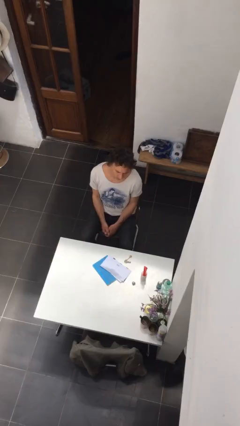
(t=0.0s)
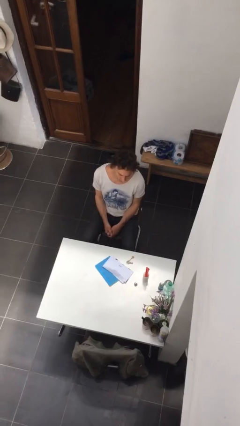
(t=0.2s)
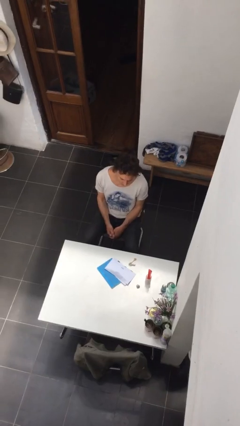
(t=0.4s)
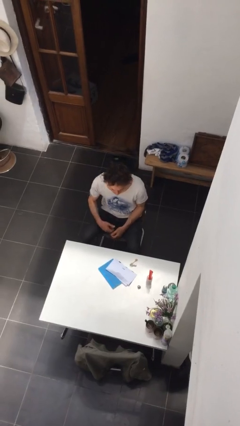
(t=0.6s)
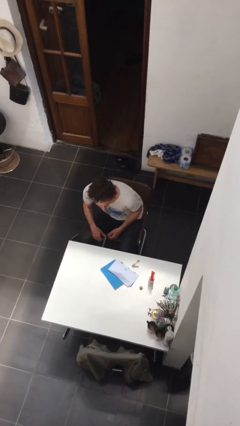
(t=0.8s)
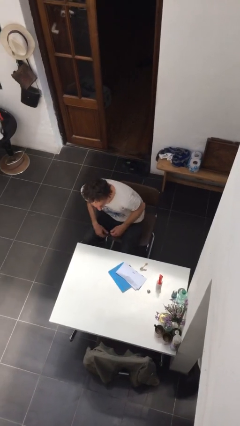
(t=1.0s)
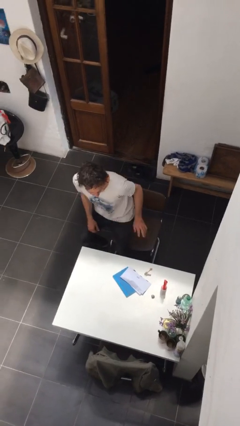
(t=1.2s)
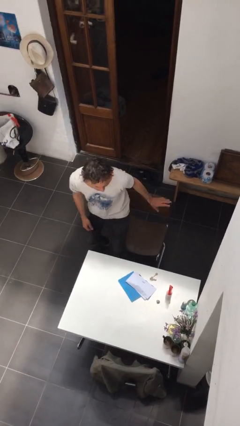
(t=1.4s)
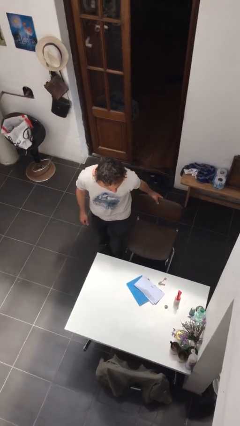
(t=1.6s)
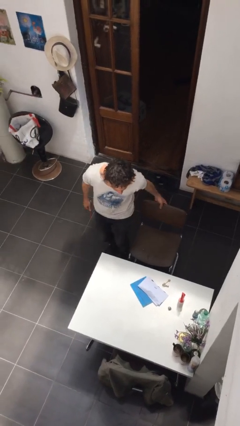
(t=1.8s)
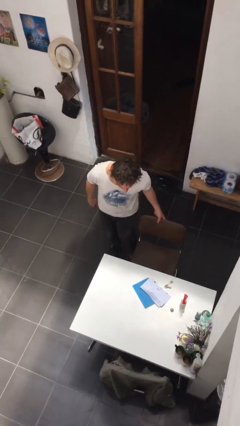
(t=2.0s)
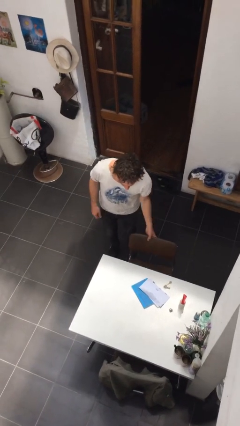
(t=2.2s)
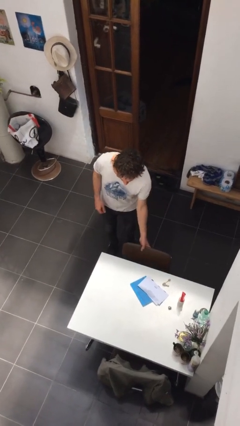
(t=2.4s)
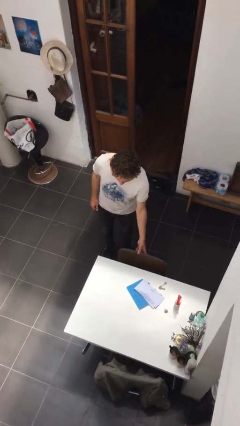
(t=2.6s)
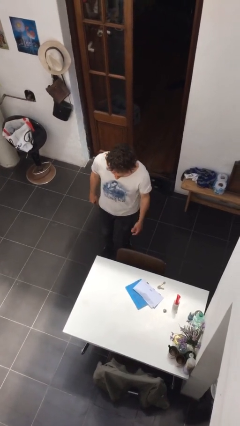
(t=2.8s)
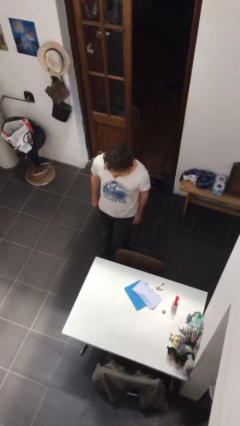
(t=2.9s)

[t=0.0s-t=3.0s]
person stands up

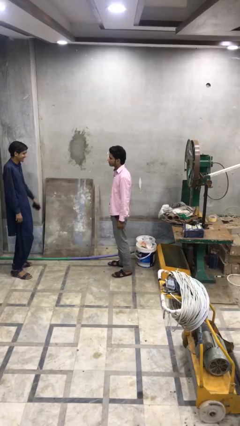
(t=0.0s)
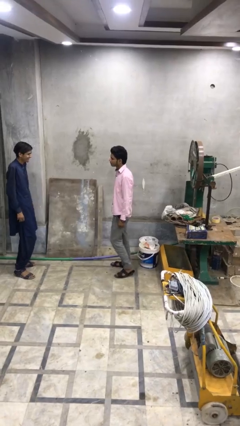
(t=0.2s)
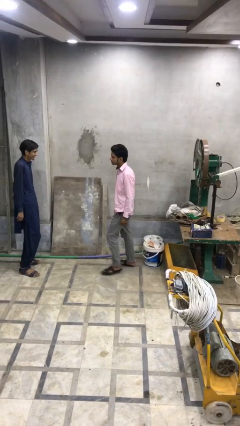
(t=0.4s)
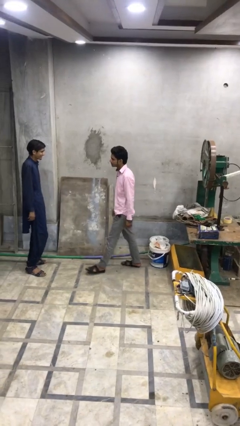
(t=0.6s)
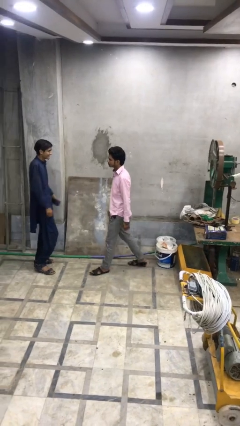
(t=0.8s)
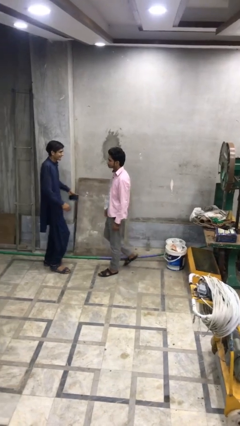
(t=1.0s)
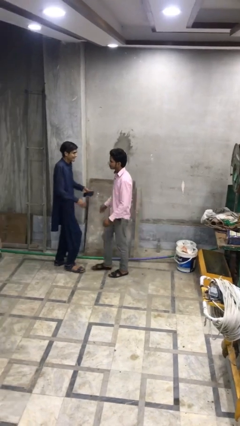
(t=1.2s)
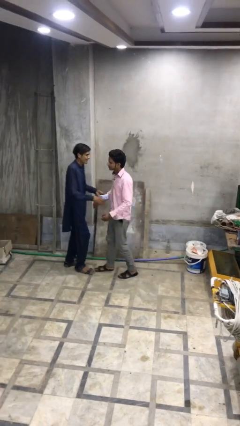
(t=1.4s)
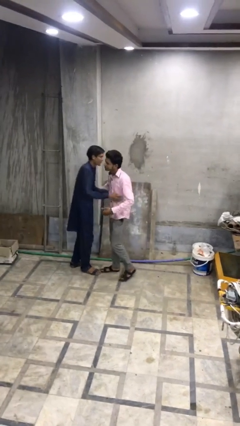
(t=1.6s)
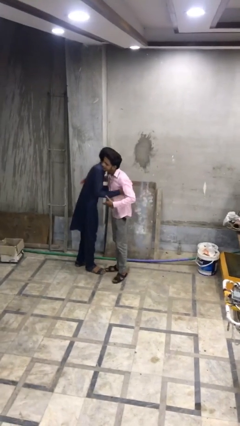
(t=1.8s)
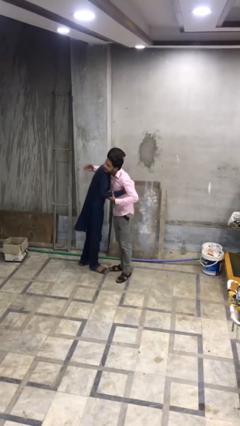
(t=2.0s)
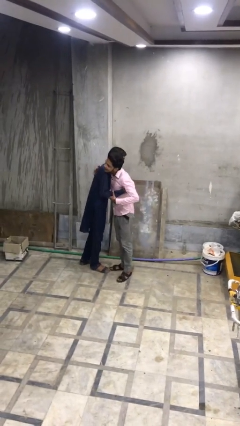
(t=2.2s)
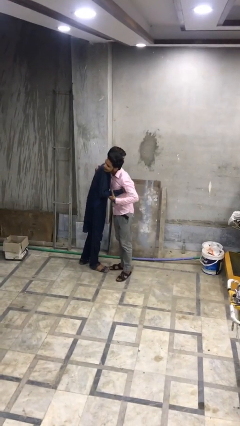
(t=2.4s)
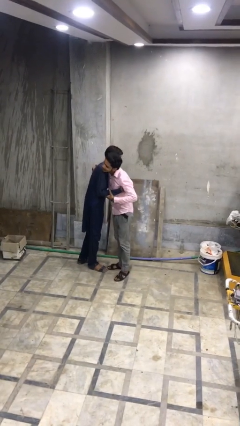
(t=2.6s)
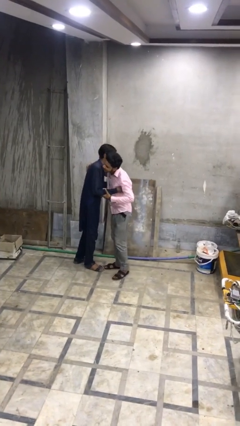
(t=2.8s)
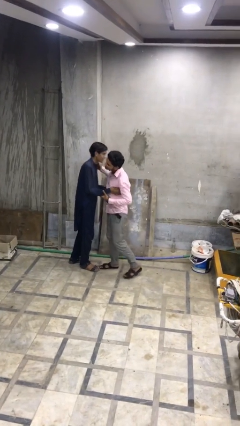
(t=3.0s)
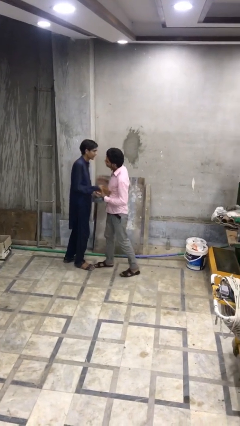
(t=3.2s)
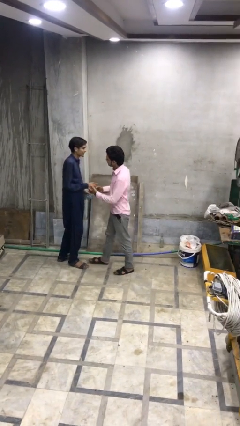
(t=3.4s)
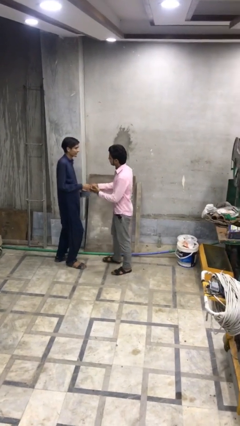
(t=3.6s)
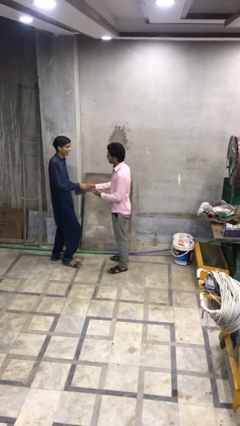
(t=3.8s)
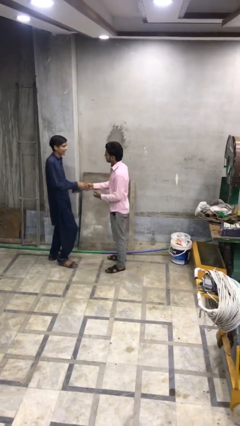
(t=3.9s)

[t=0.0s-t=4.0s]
person embraces person

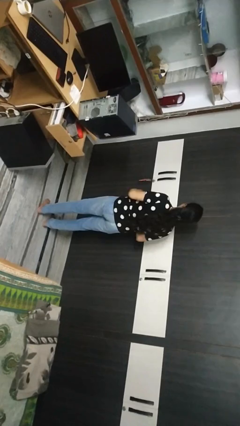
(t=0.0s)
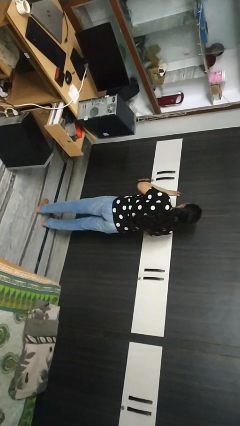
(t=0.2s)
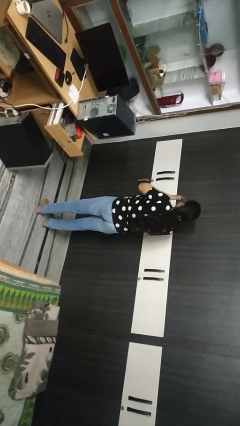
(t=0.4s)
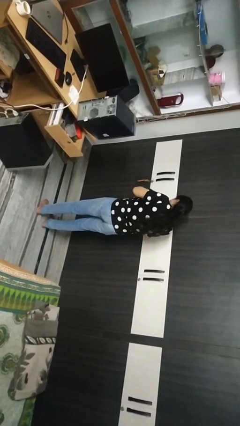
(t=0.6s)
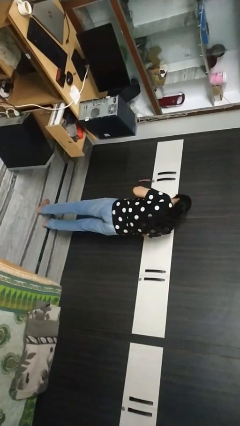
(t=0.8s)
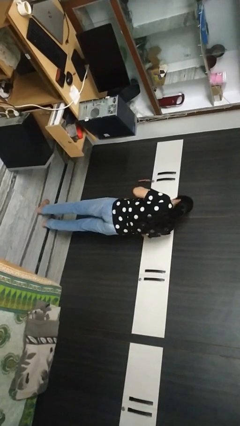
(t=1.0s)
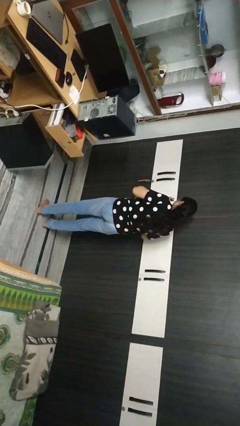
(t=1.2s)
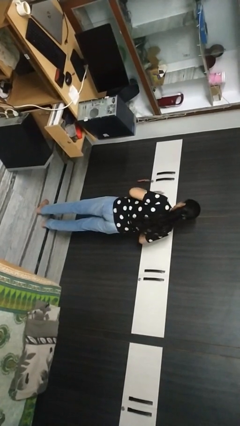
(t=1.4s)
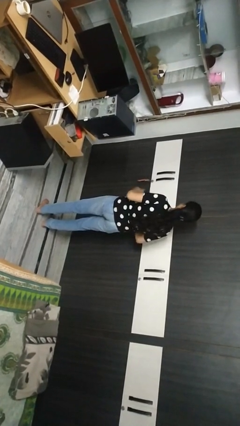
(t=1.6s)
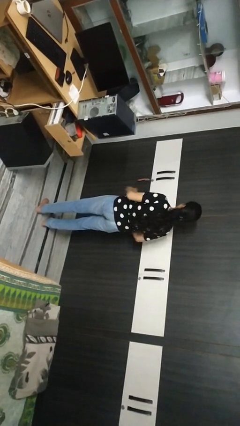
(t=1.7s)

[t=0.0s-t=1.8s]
person sneezes into hand

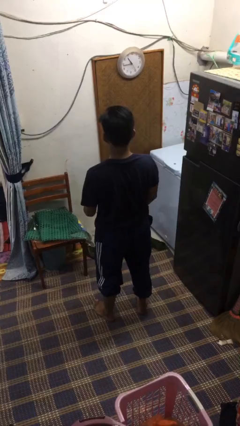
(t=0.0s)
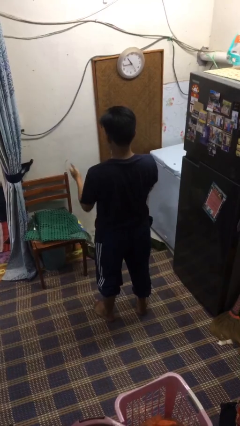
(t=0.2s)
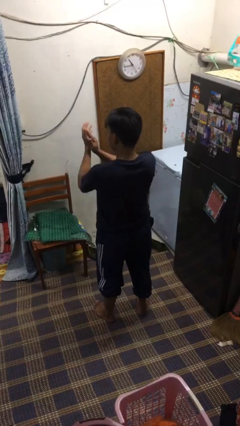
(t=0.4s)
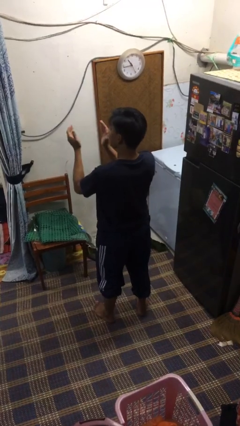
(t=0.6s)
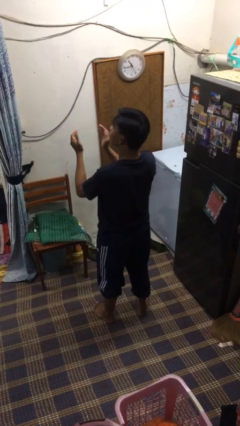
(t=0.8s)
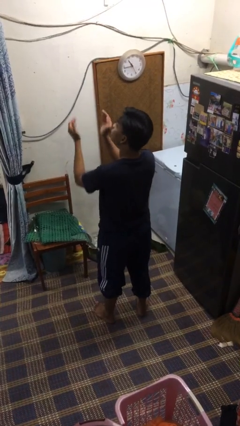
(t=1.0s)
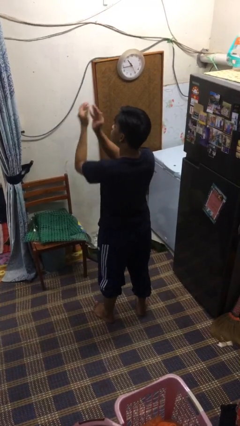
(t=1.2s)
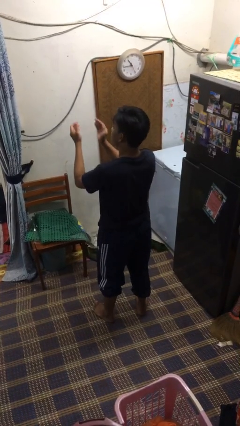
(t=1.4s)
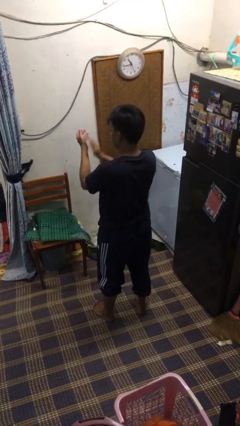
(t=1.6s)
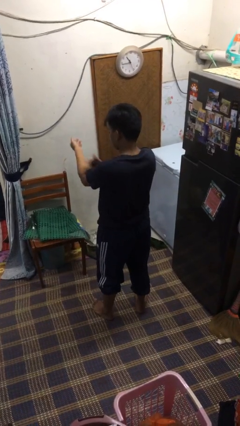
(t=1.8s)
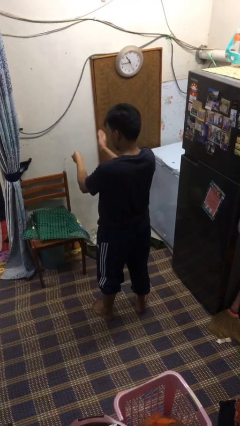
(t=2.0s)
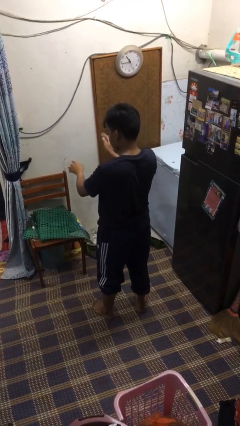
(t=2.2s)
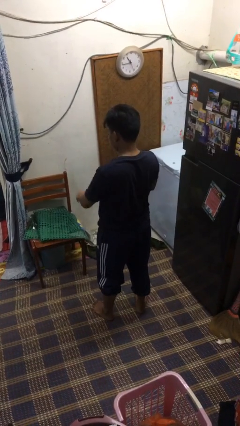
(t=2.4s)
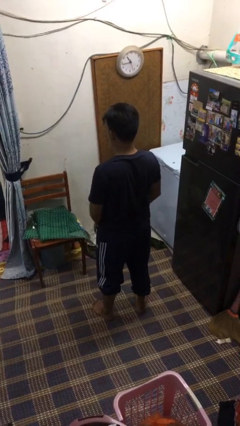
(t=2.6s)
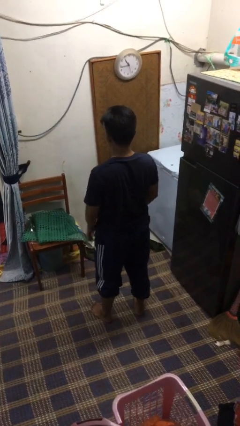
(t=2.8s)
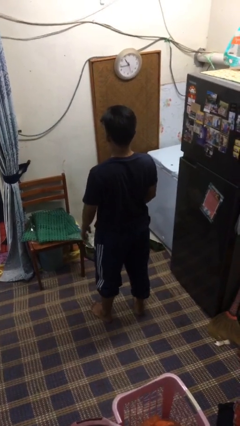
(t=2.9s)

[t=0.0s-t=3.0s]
person swats bug

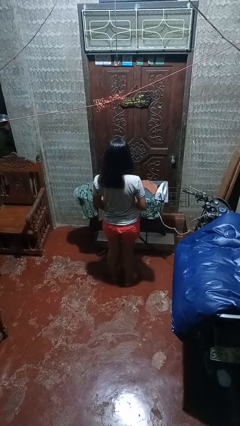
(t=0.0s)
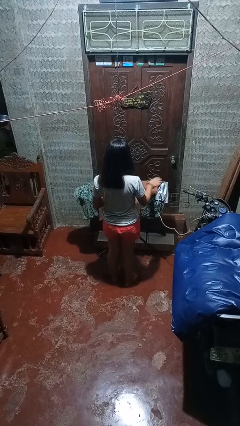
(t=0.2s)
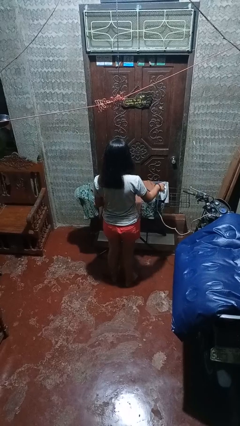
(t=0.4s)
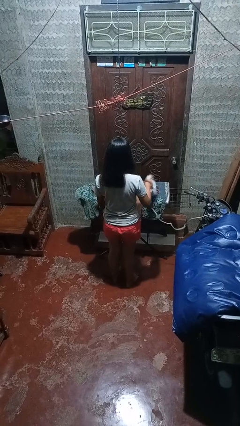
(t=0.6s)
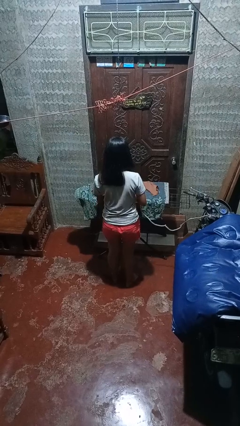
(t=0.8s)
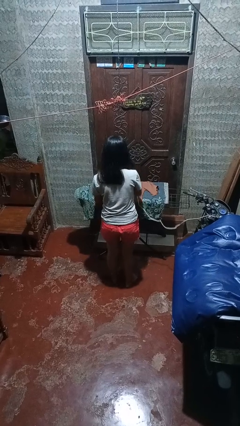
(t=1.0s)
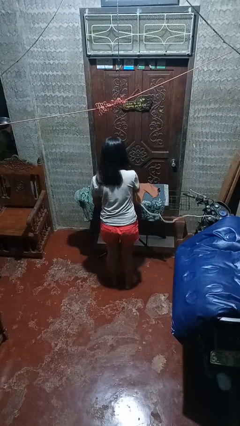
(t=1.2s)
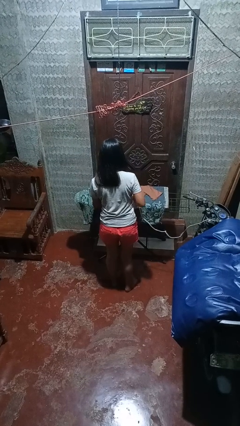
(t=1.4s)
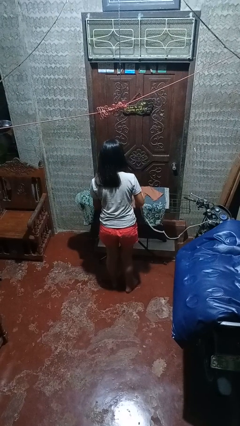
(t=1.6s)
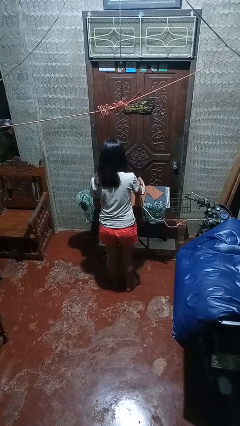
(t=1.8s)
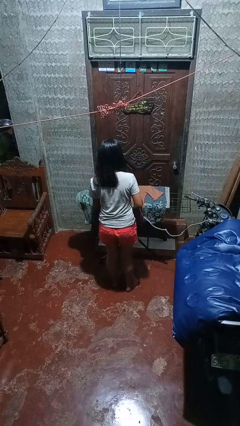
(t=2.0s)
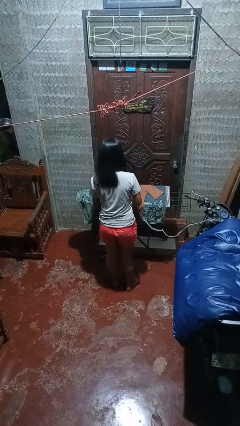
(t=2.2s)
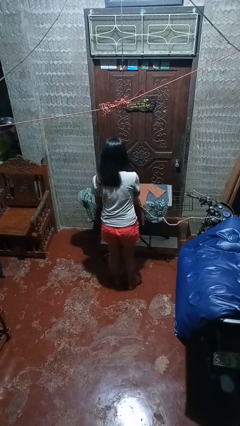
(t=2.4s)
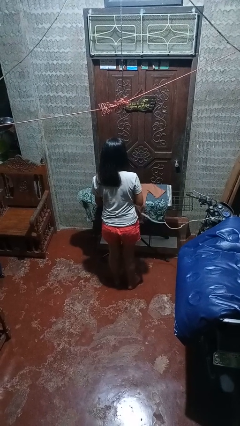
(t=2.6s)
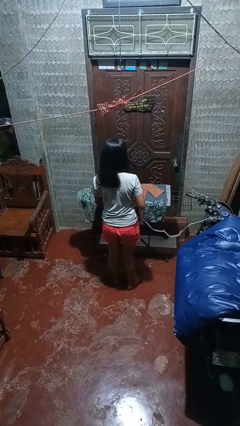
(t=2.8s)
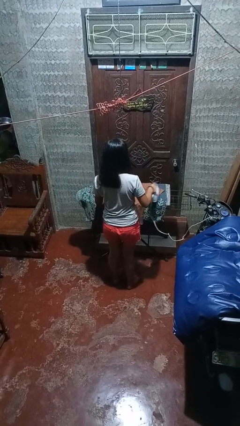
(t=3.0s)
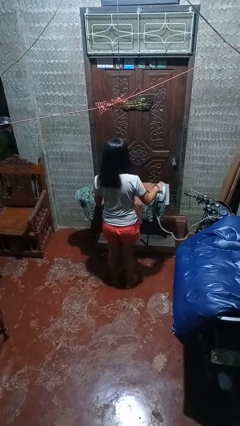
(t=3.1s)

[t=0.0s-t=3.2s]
person irons clothes

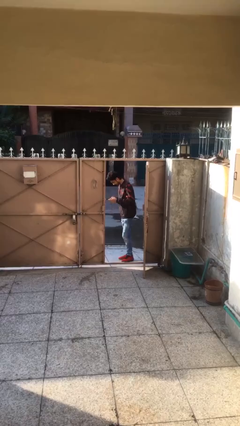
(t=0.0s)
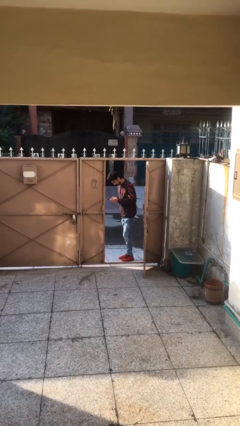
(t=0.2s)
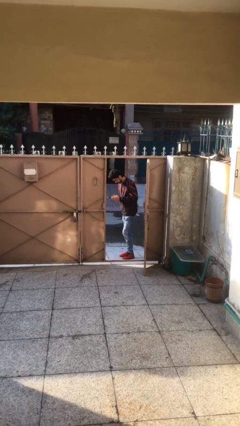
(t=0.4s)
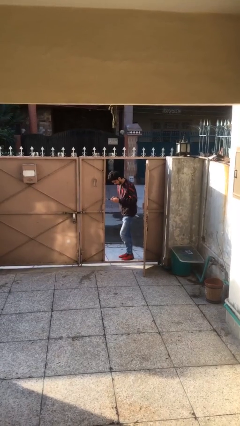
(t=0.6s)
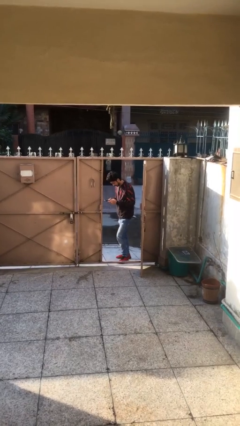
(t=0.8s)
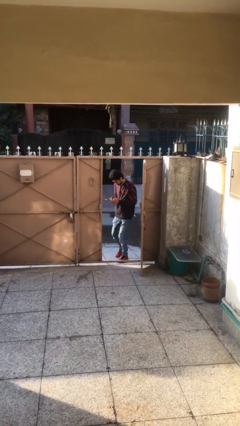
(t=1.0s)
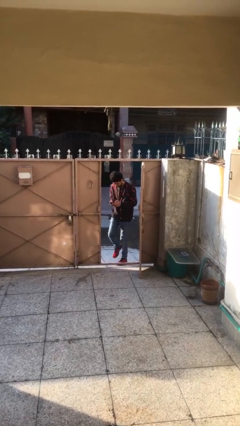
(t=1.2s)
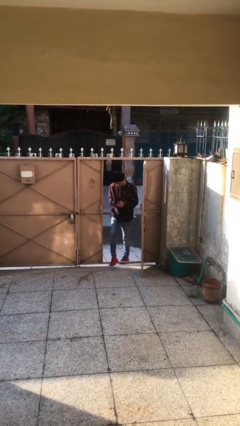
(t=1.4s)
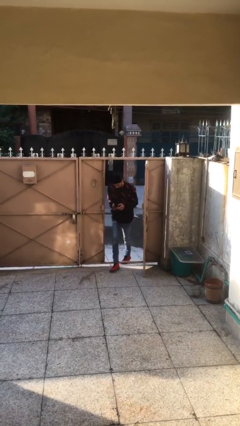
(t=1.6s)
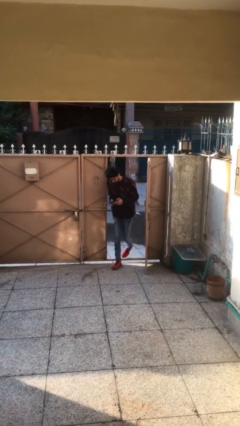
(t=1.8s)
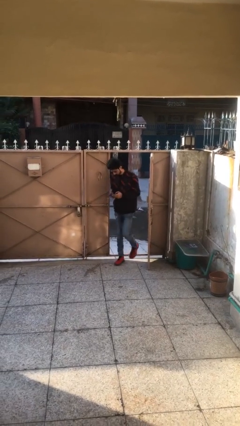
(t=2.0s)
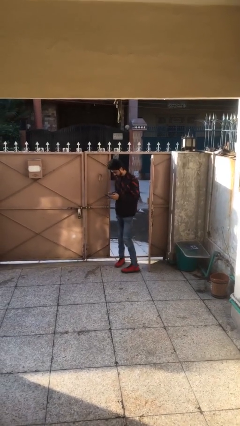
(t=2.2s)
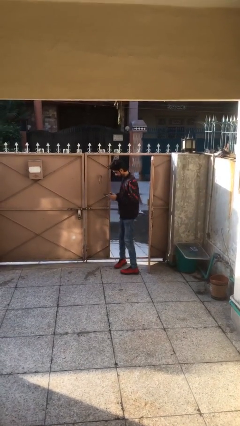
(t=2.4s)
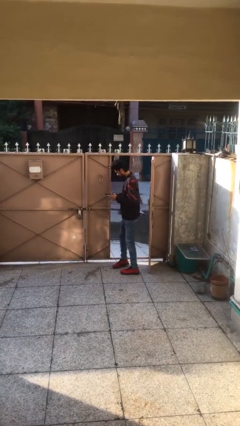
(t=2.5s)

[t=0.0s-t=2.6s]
person enters scene through structure
